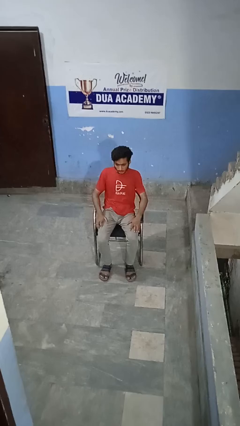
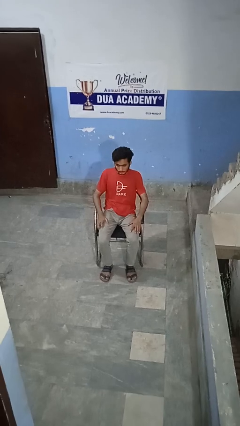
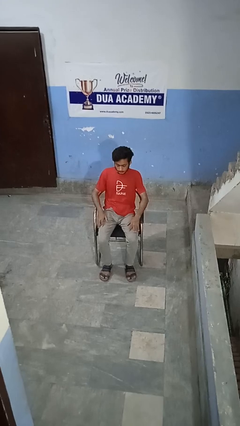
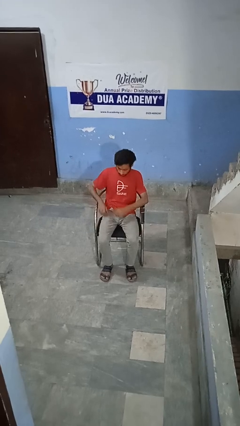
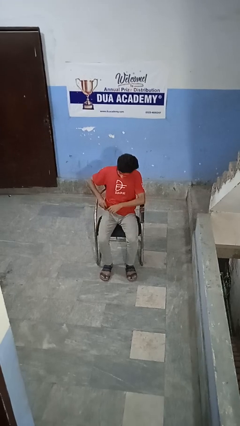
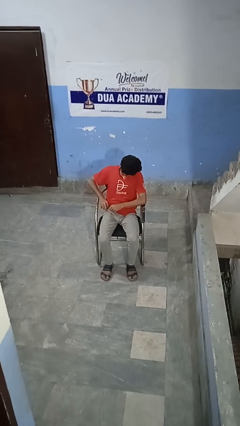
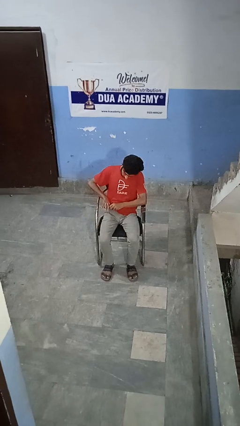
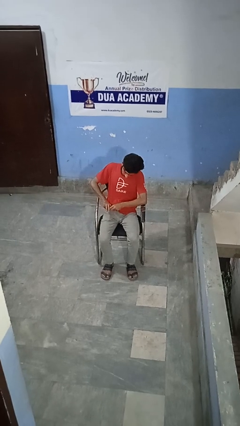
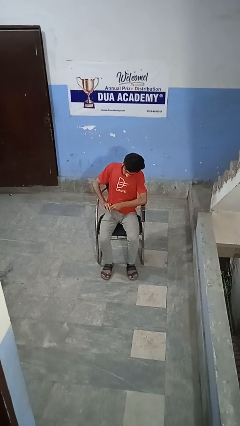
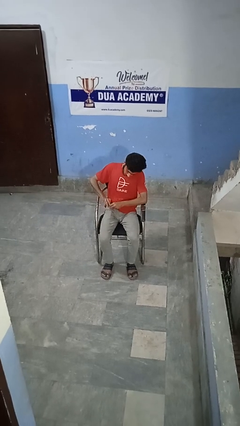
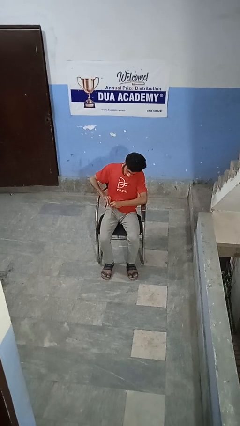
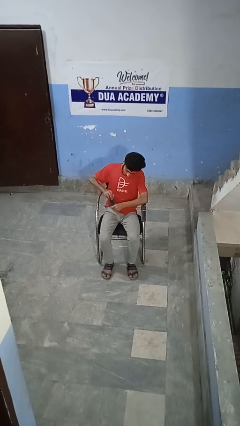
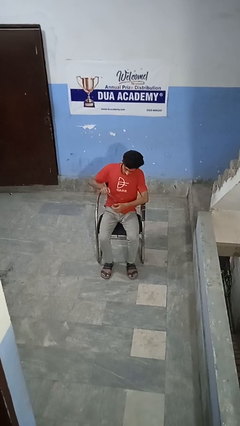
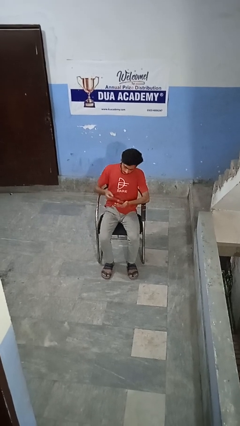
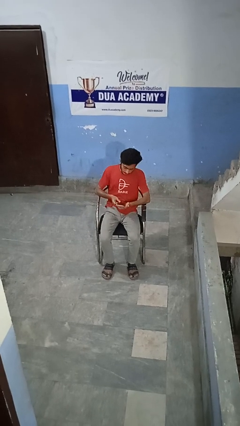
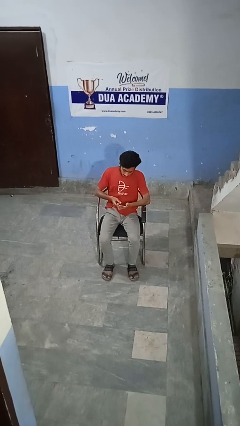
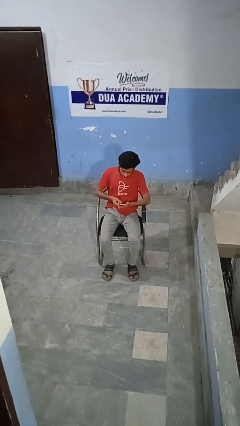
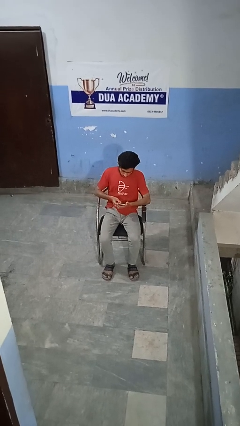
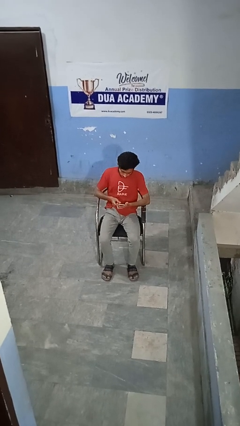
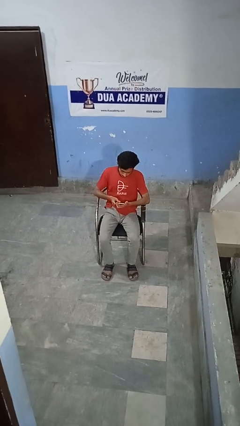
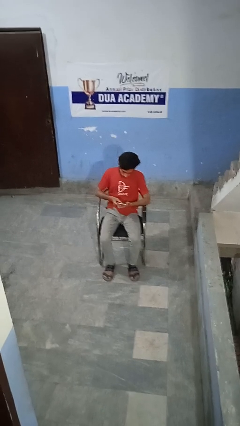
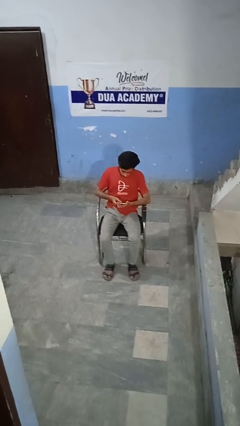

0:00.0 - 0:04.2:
person takes phone from pocket

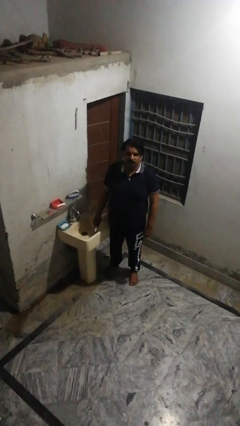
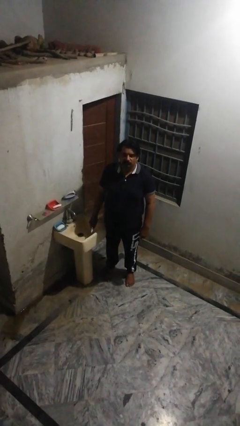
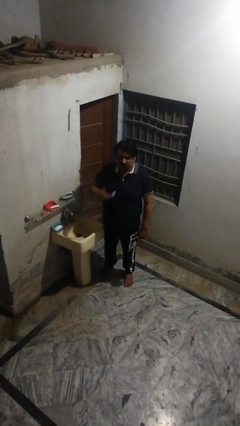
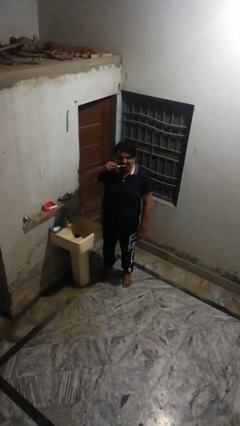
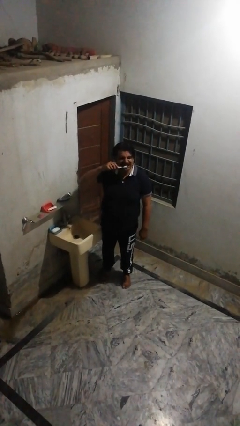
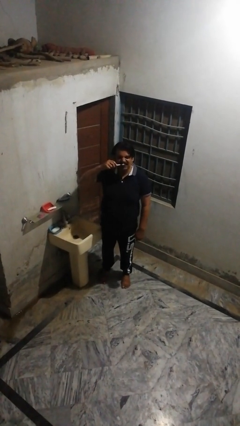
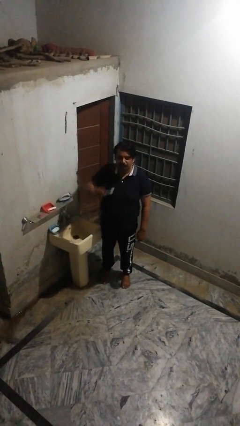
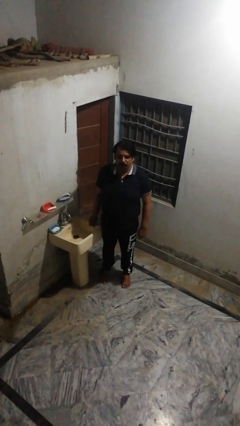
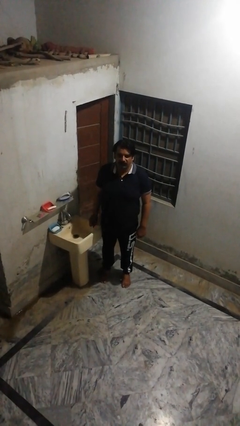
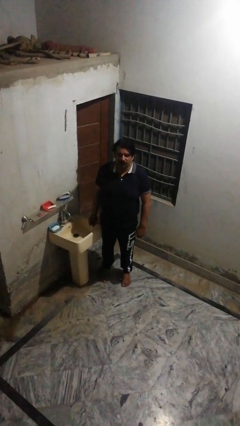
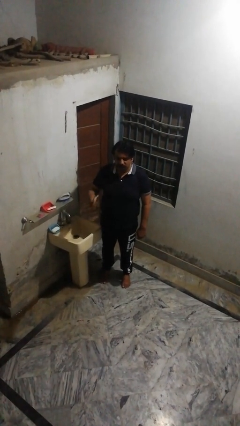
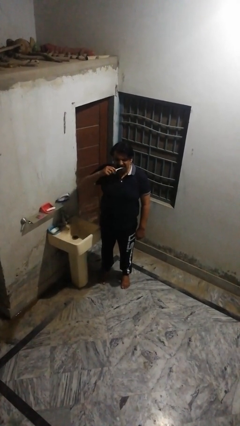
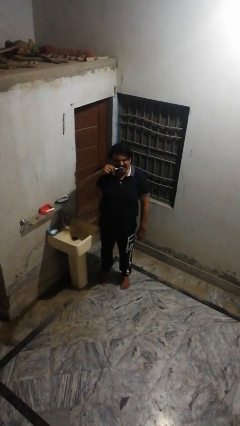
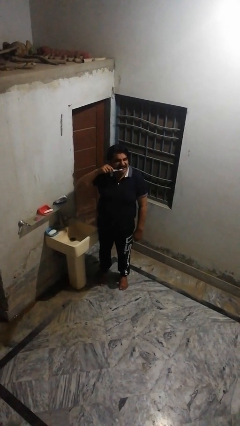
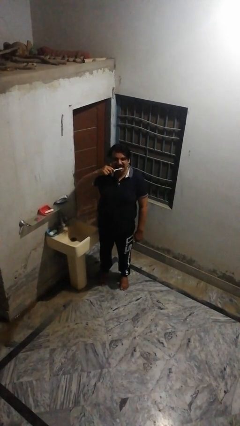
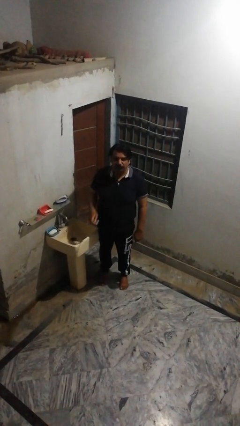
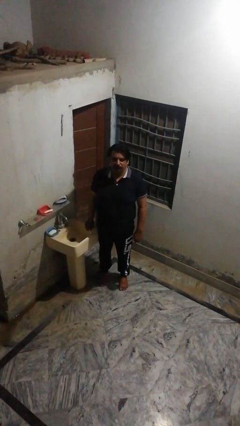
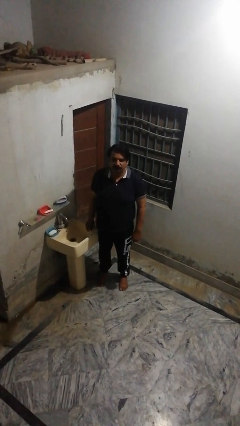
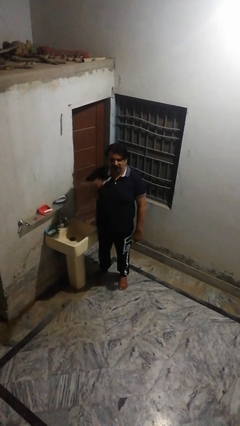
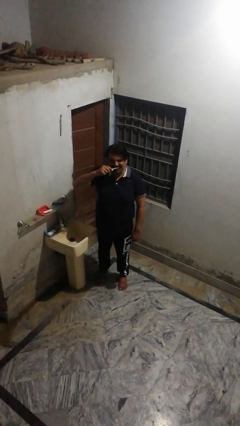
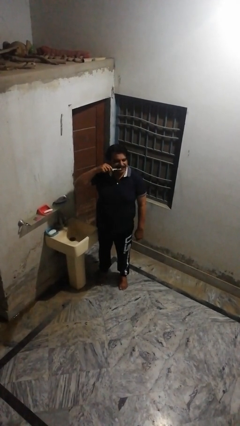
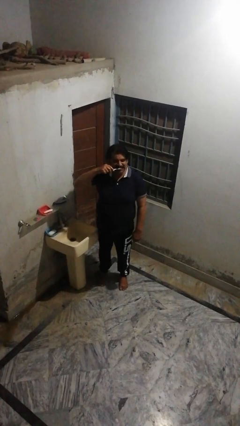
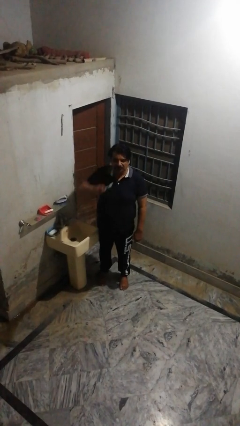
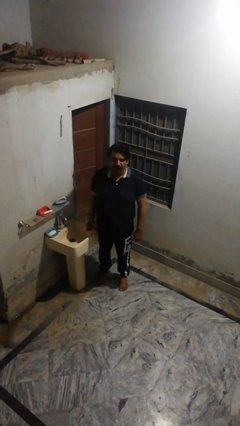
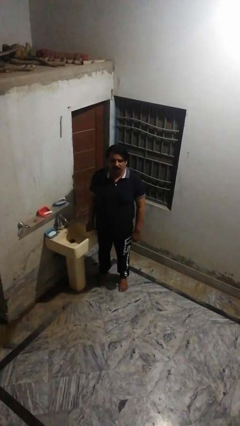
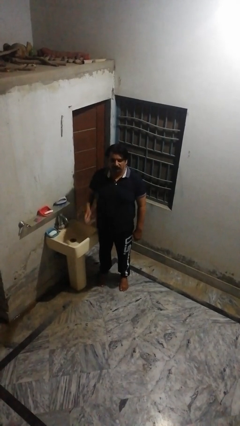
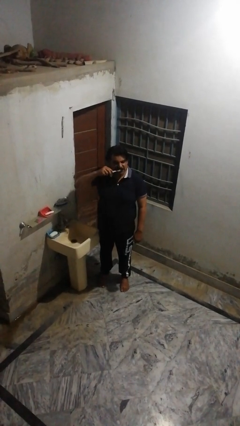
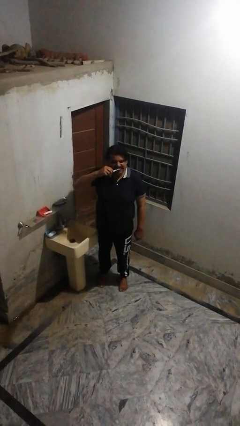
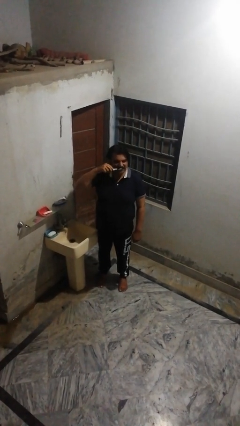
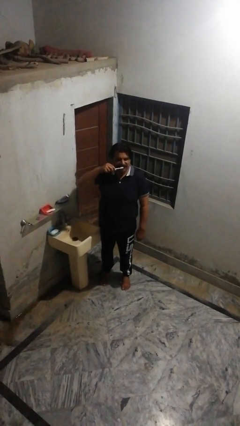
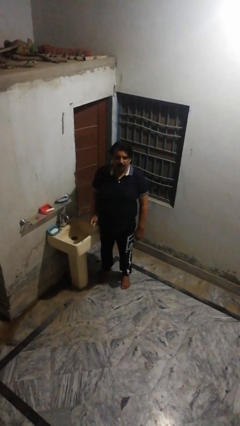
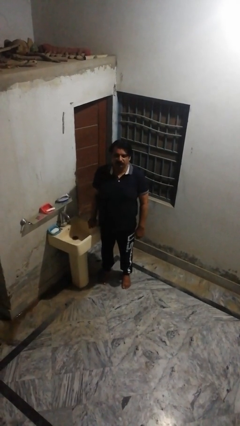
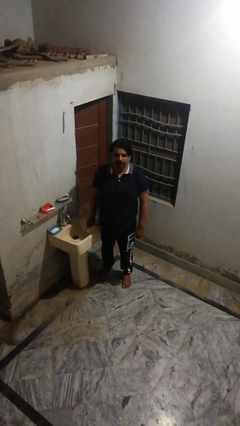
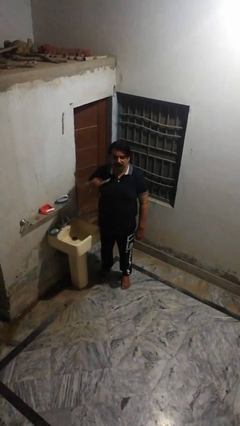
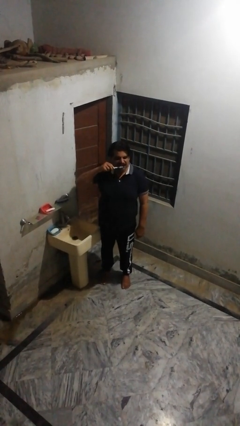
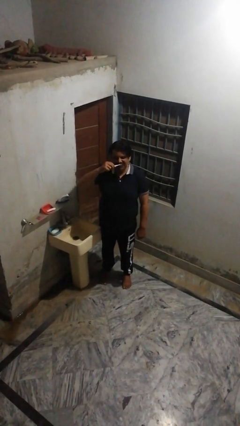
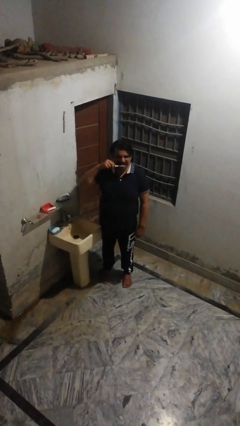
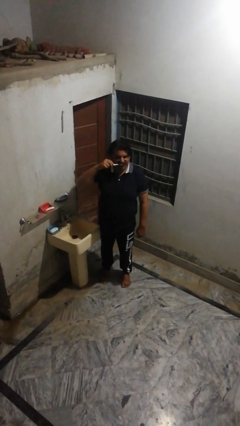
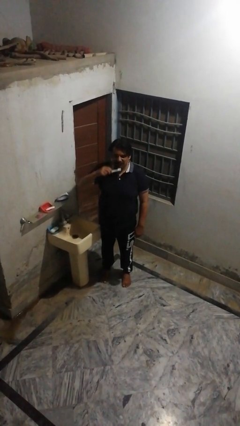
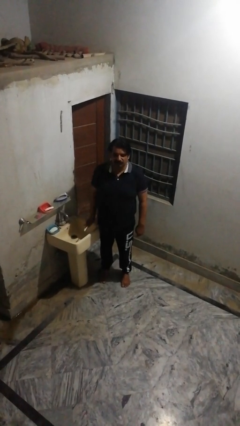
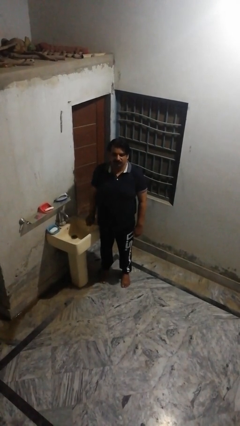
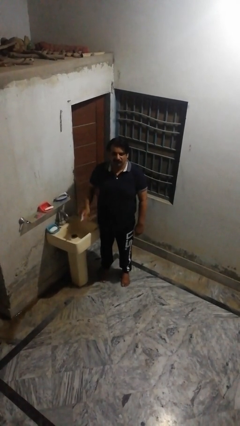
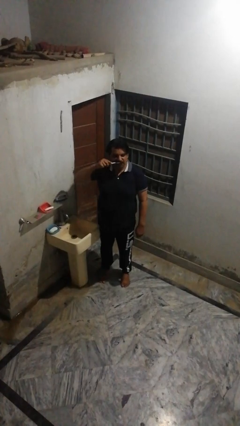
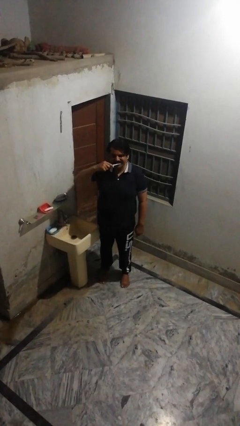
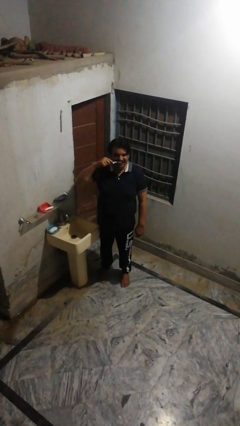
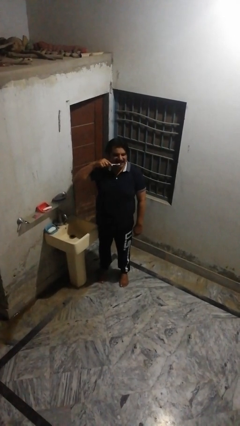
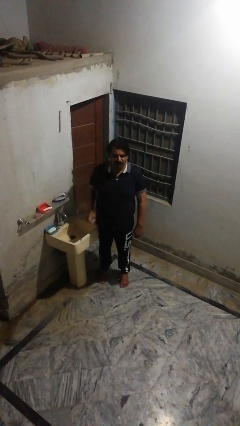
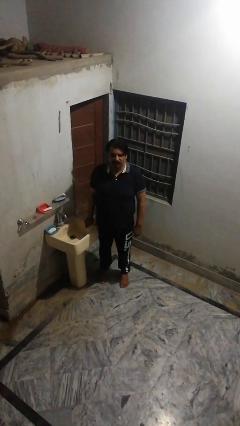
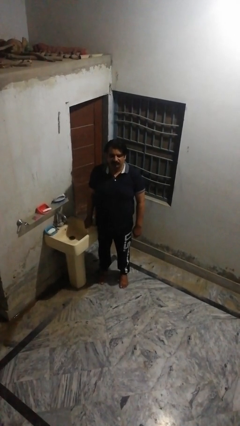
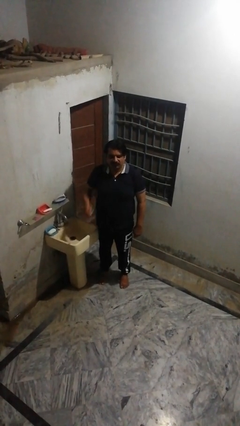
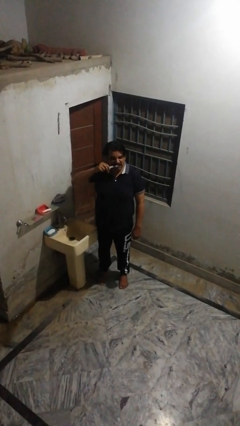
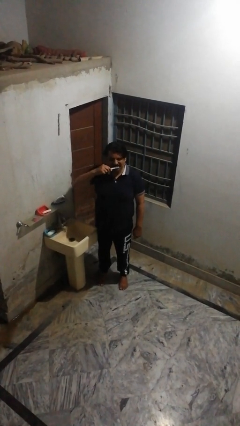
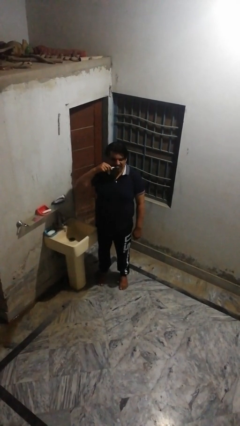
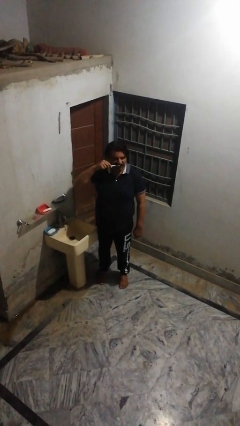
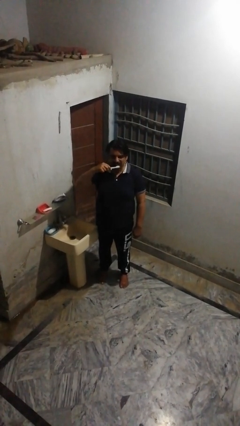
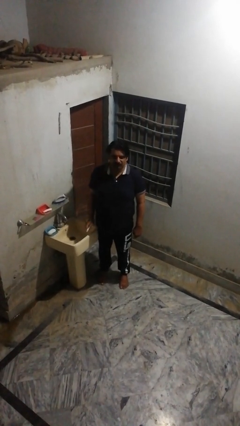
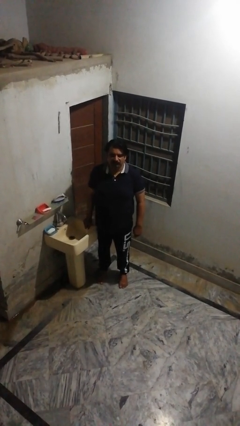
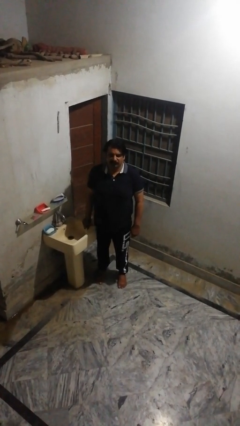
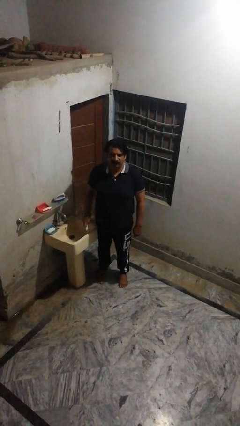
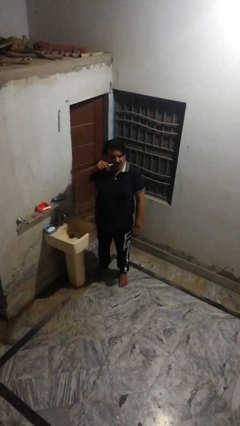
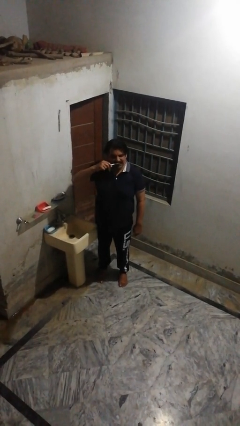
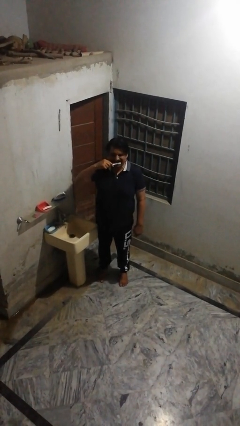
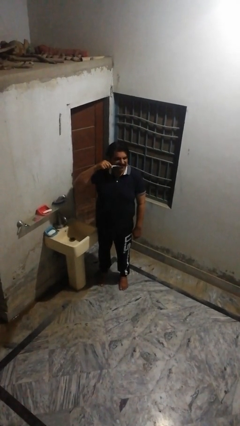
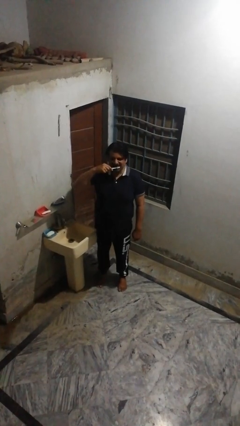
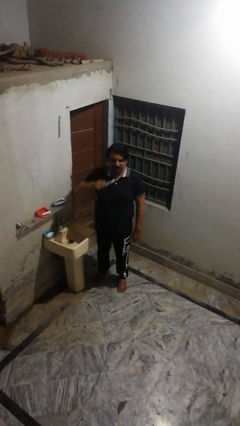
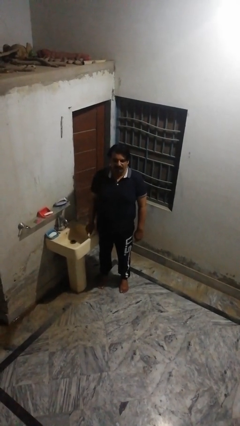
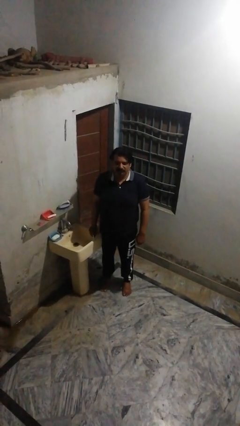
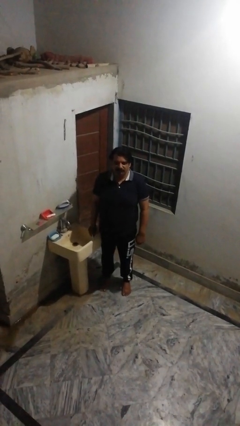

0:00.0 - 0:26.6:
person brushes teeth

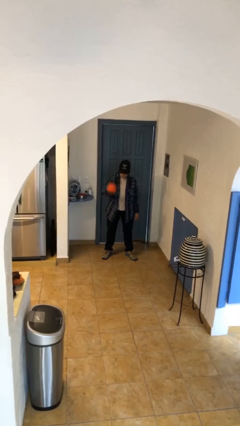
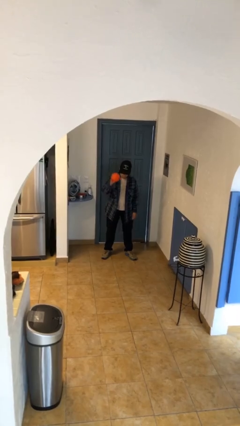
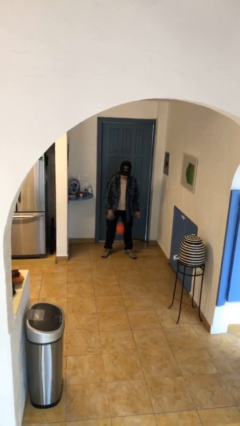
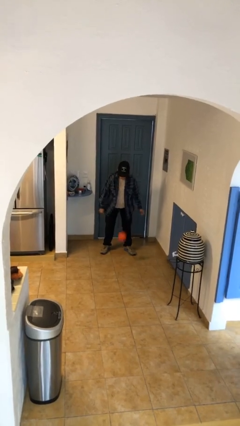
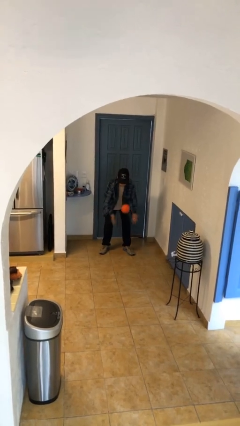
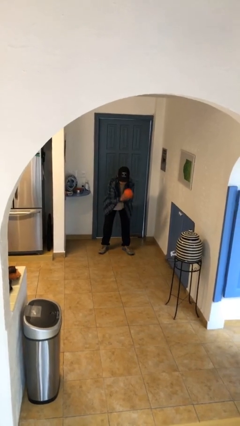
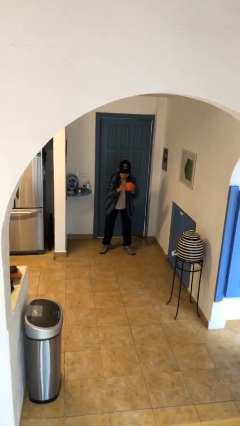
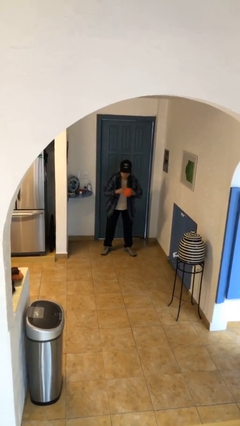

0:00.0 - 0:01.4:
person bounces ball on floor
